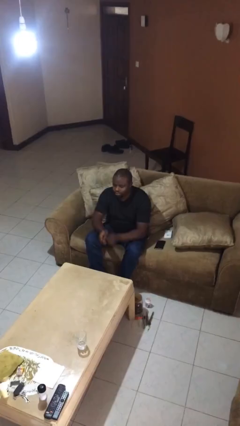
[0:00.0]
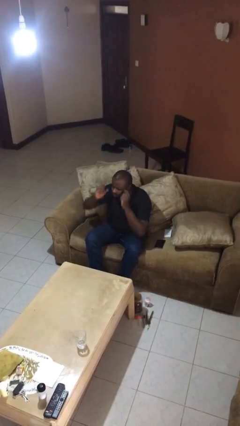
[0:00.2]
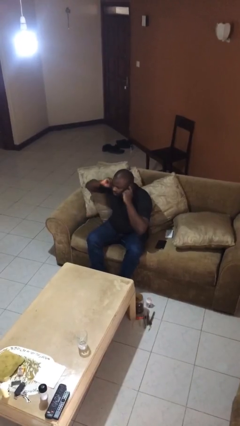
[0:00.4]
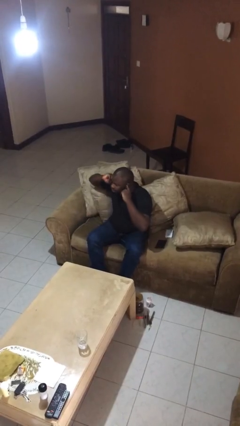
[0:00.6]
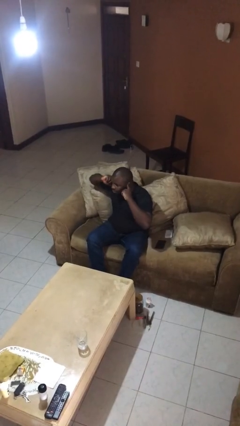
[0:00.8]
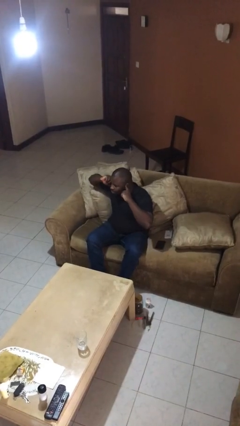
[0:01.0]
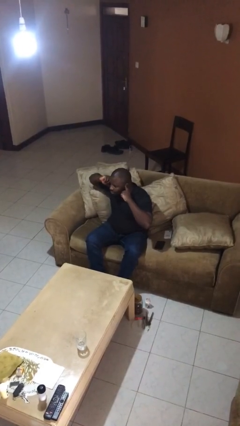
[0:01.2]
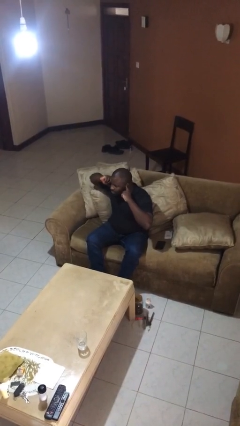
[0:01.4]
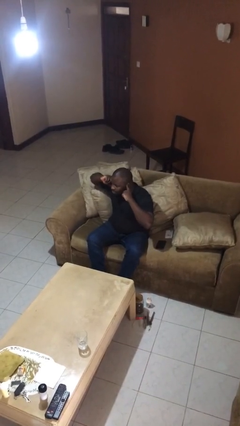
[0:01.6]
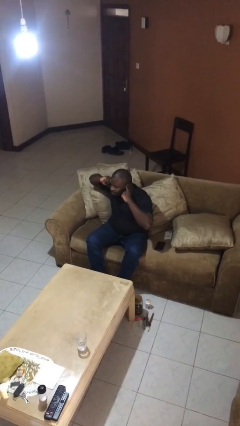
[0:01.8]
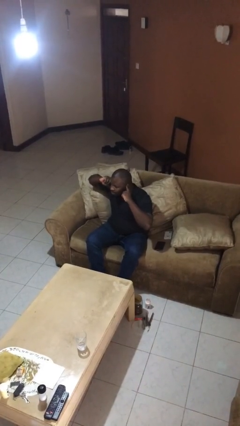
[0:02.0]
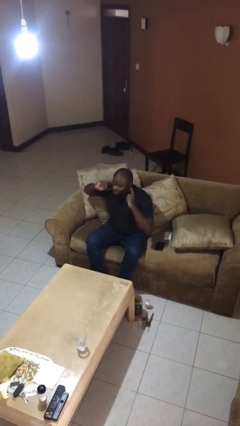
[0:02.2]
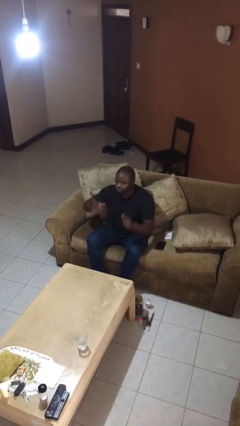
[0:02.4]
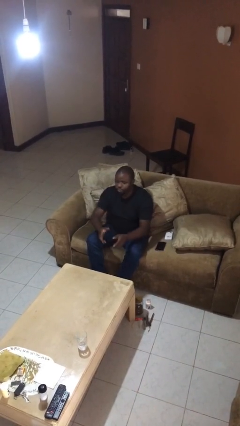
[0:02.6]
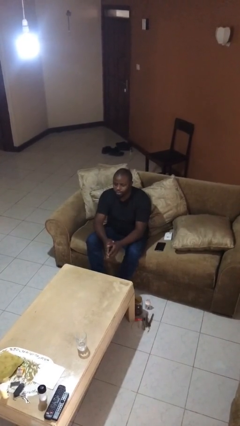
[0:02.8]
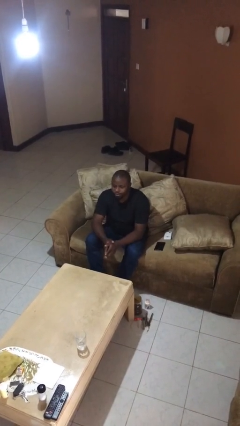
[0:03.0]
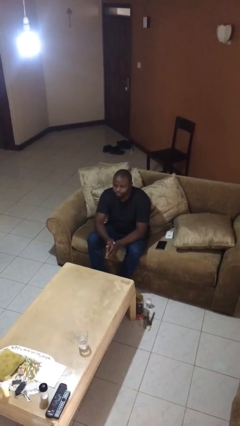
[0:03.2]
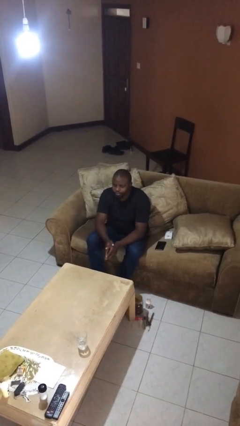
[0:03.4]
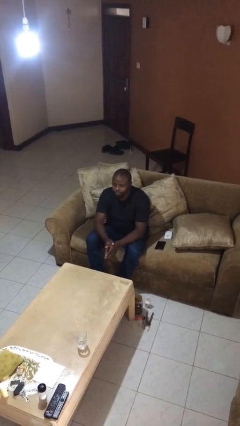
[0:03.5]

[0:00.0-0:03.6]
person puts fingers in ear

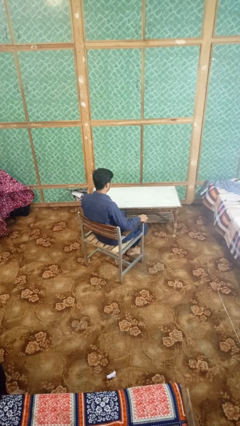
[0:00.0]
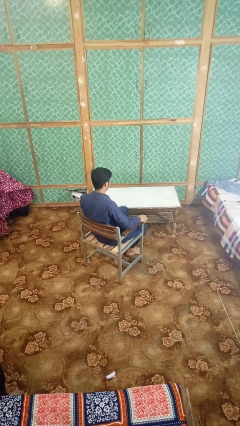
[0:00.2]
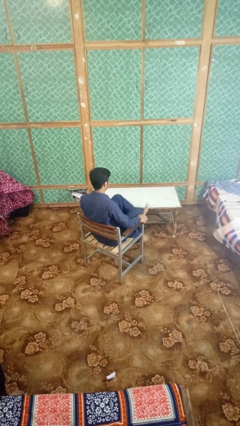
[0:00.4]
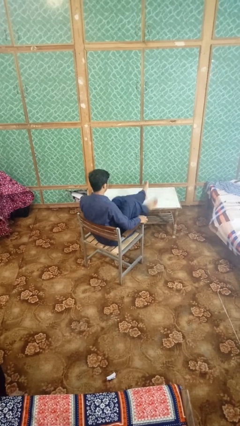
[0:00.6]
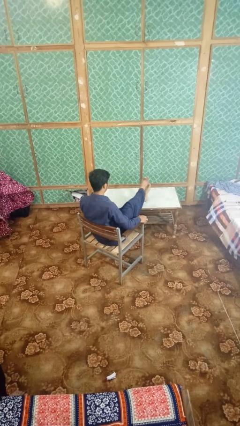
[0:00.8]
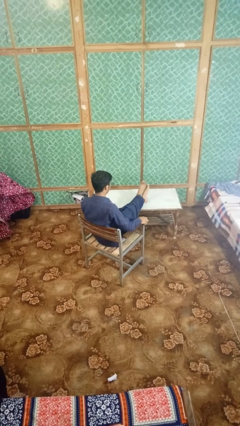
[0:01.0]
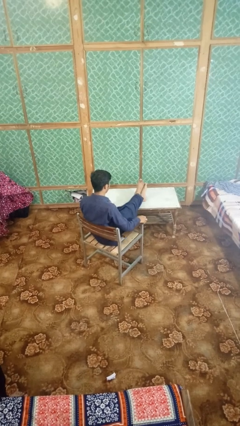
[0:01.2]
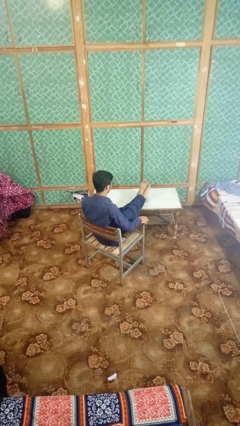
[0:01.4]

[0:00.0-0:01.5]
person puts feet up

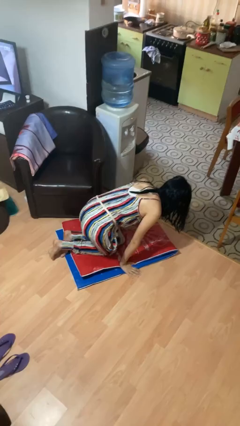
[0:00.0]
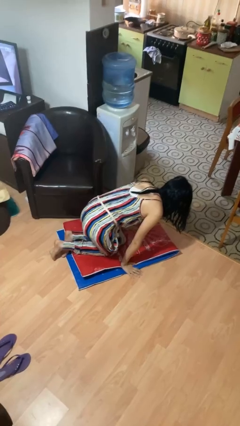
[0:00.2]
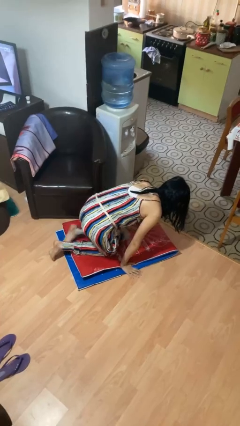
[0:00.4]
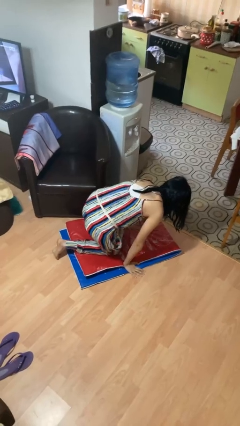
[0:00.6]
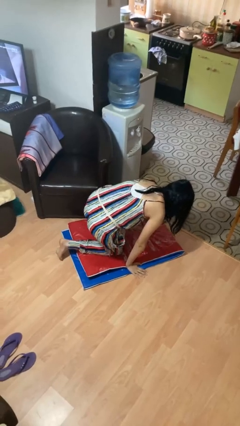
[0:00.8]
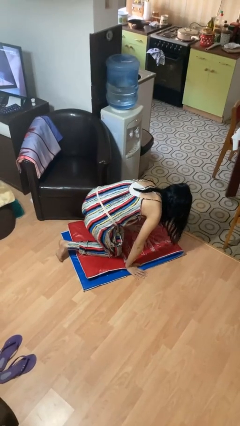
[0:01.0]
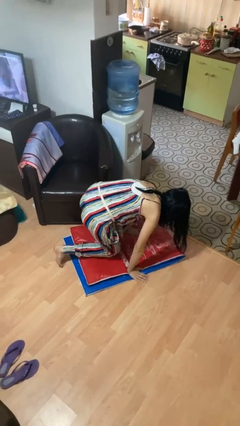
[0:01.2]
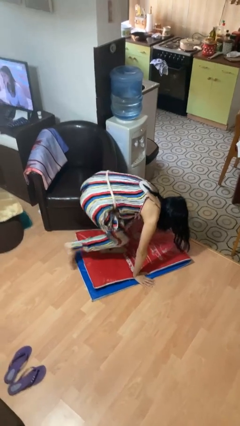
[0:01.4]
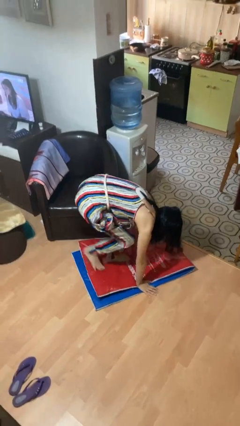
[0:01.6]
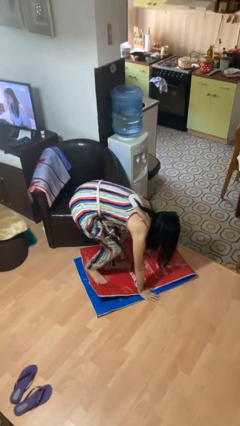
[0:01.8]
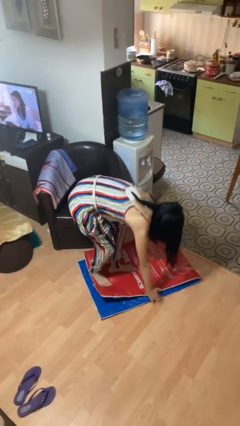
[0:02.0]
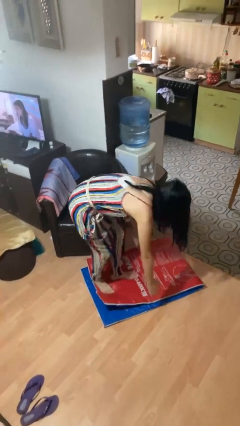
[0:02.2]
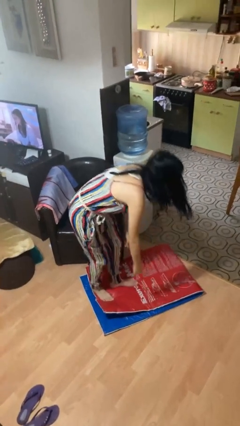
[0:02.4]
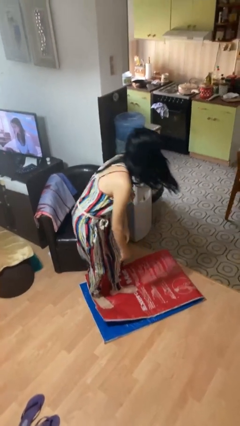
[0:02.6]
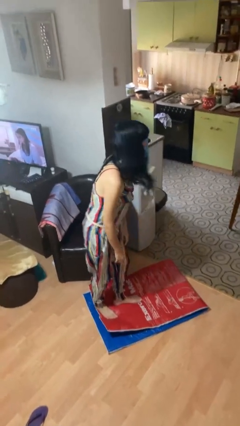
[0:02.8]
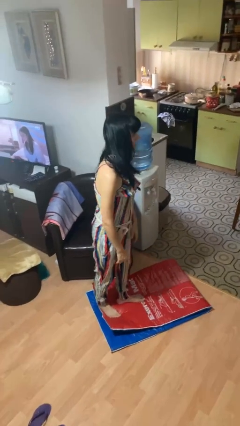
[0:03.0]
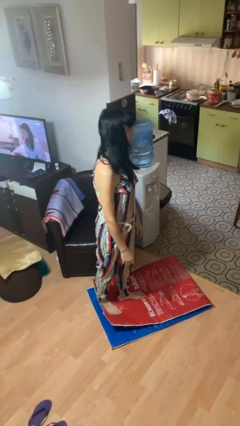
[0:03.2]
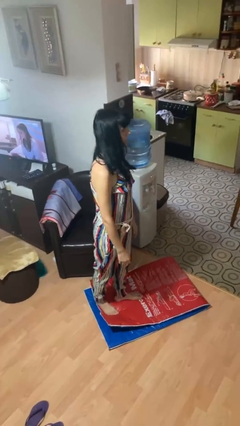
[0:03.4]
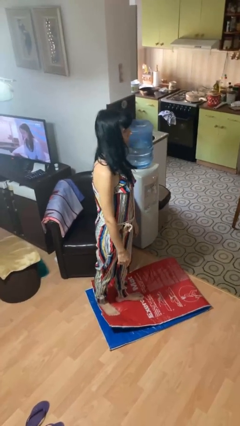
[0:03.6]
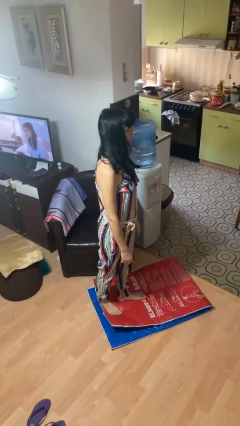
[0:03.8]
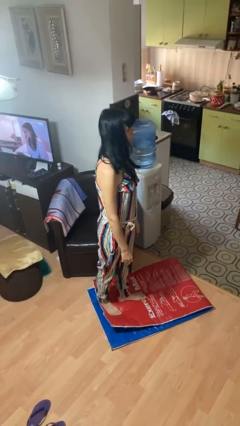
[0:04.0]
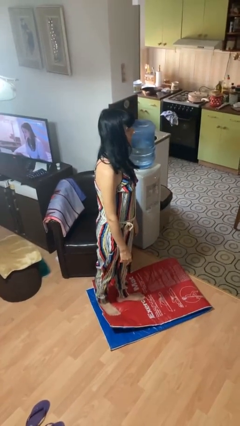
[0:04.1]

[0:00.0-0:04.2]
person stands up from floor

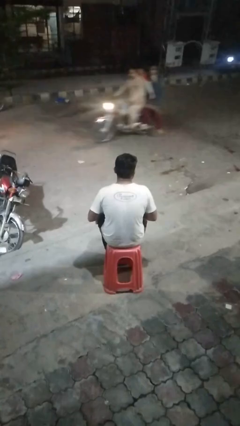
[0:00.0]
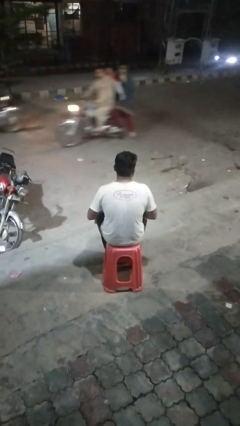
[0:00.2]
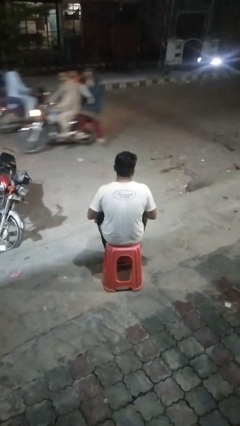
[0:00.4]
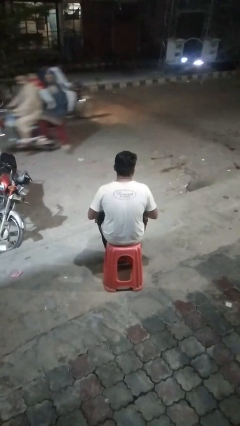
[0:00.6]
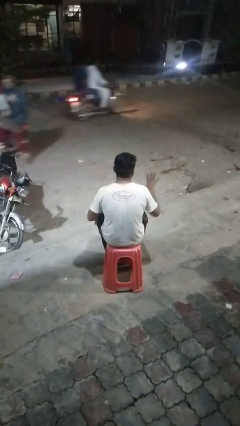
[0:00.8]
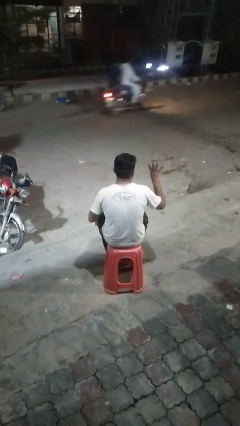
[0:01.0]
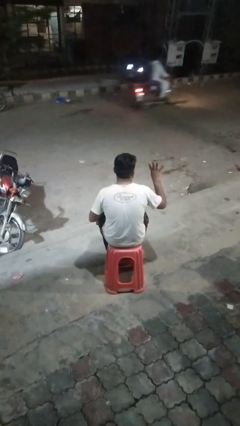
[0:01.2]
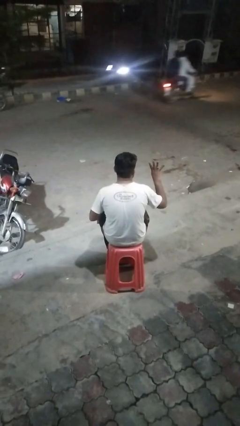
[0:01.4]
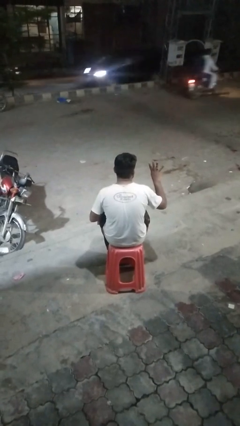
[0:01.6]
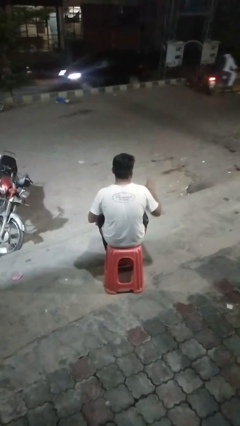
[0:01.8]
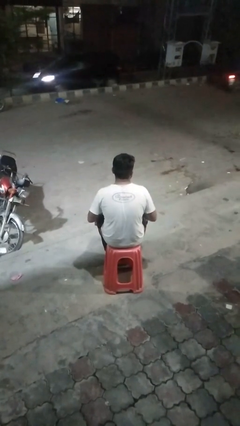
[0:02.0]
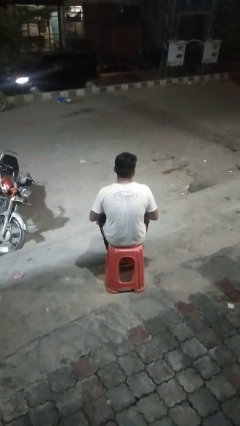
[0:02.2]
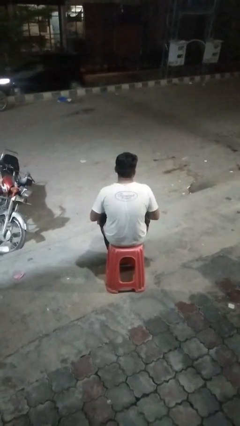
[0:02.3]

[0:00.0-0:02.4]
person gestures number four

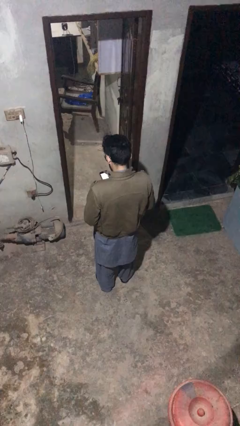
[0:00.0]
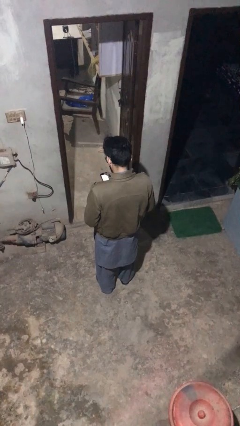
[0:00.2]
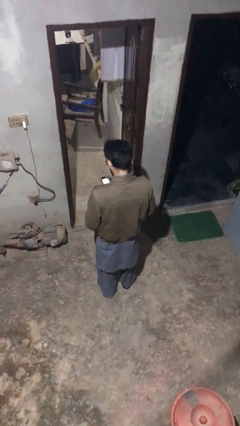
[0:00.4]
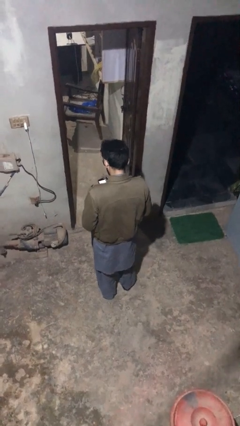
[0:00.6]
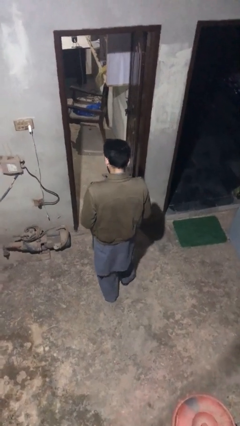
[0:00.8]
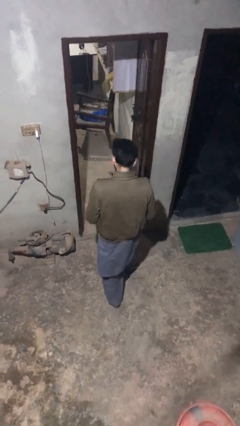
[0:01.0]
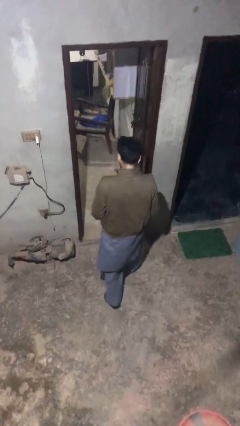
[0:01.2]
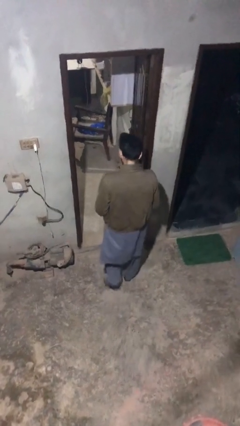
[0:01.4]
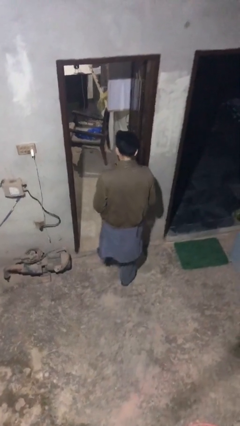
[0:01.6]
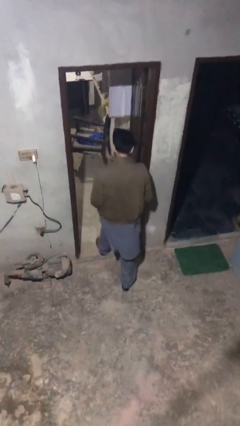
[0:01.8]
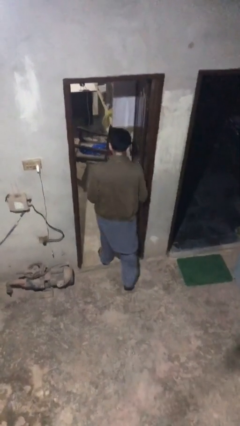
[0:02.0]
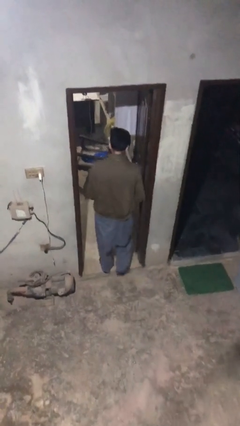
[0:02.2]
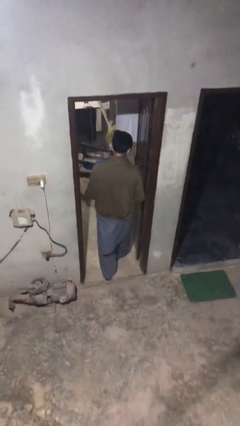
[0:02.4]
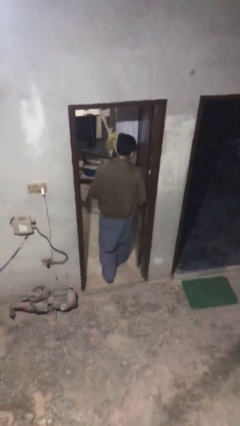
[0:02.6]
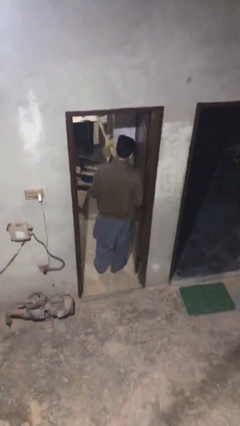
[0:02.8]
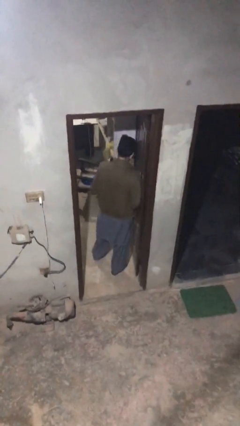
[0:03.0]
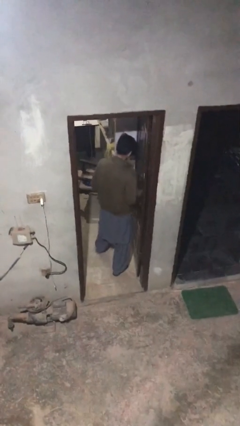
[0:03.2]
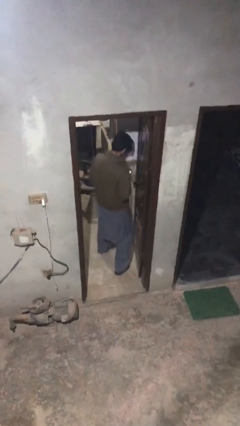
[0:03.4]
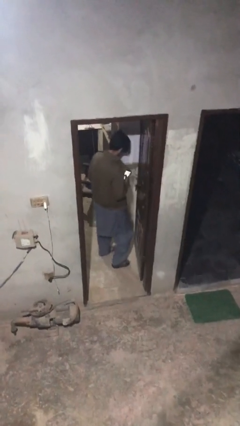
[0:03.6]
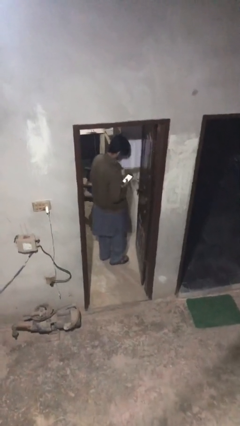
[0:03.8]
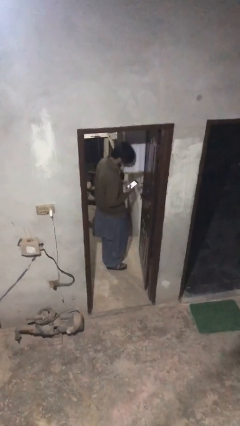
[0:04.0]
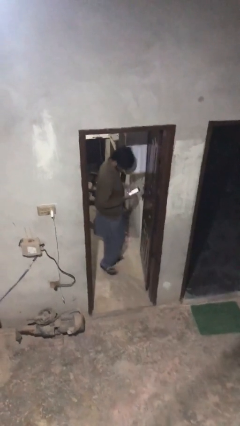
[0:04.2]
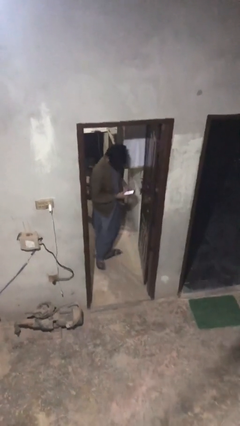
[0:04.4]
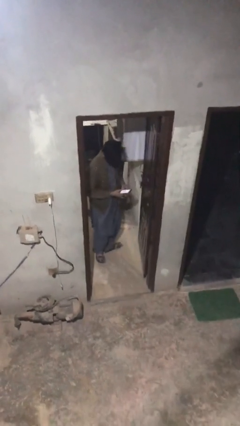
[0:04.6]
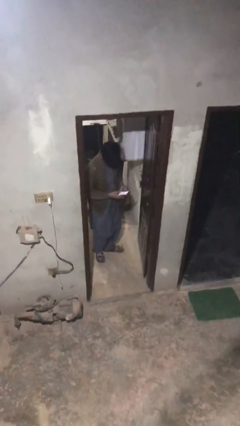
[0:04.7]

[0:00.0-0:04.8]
person enters scene through structure

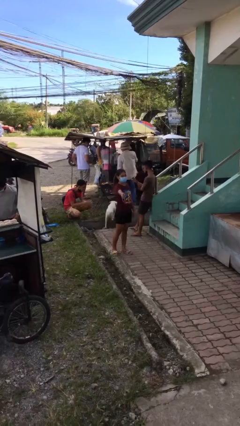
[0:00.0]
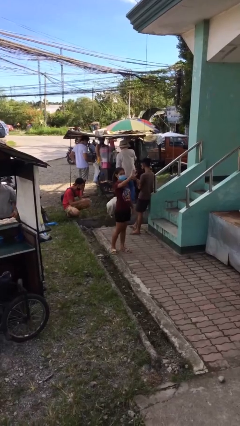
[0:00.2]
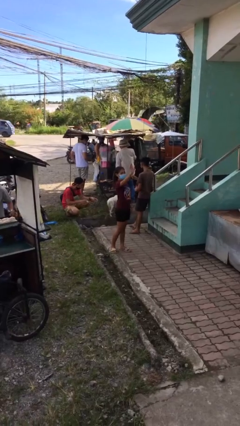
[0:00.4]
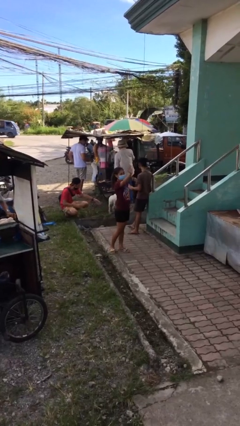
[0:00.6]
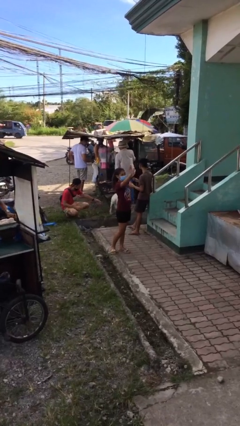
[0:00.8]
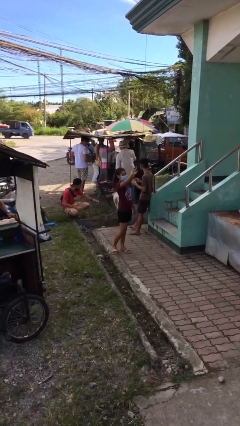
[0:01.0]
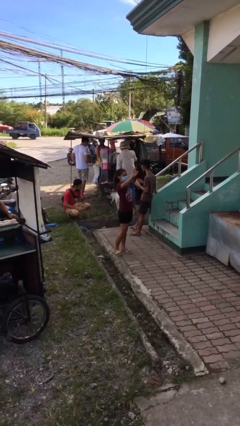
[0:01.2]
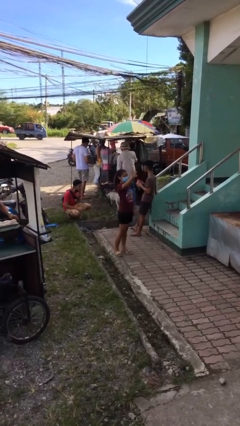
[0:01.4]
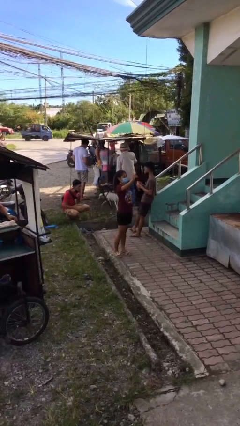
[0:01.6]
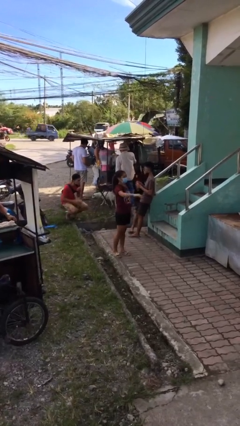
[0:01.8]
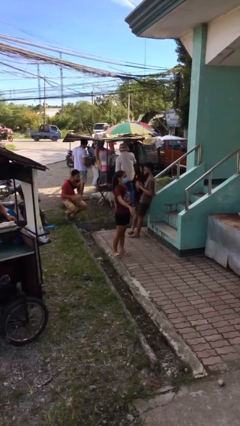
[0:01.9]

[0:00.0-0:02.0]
person waves at person
